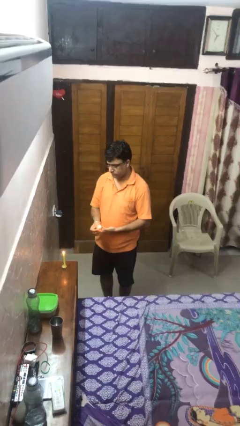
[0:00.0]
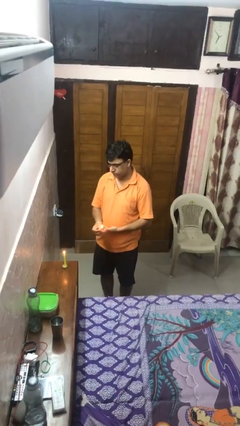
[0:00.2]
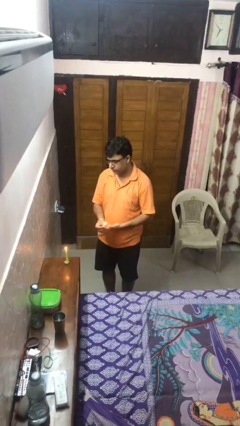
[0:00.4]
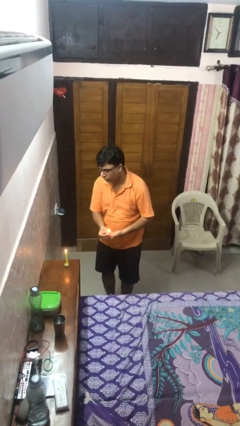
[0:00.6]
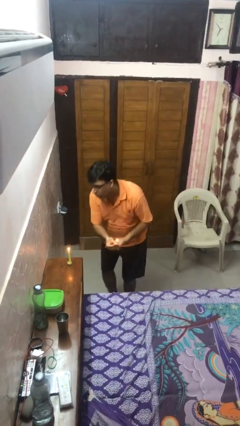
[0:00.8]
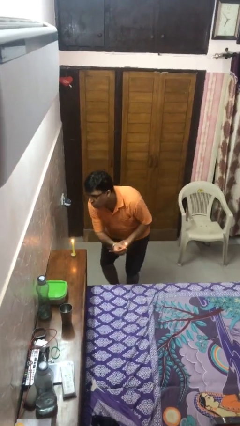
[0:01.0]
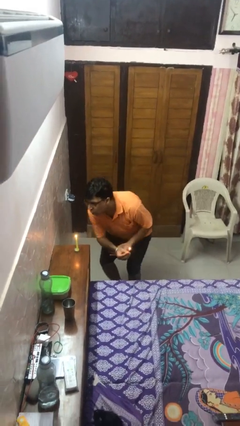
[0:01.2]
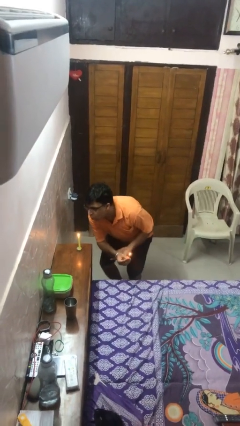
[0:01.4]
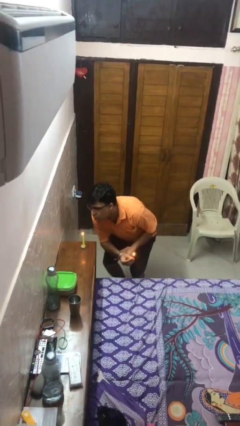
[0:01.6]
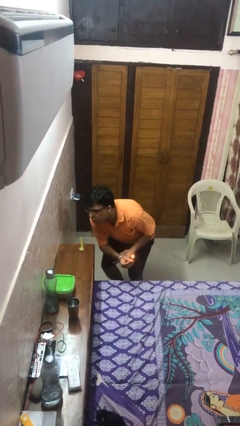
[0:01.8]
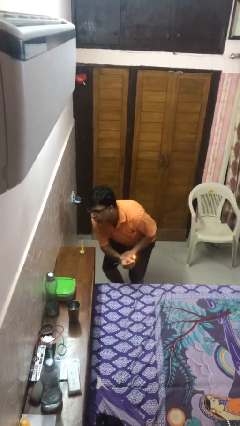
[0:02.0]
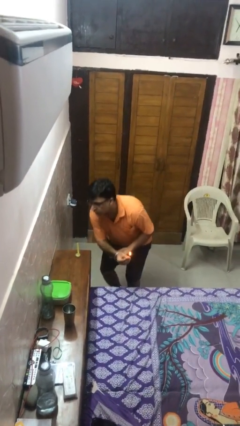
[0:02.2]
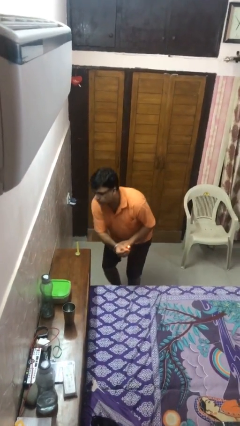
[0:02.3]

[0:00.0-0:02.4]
person extinguishes candle

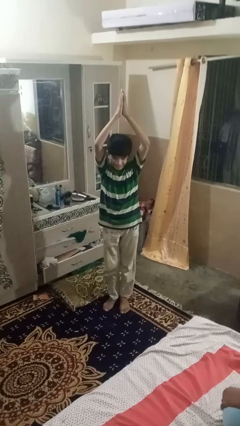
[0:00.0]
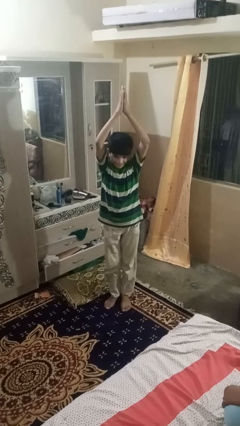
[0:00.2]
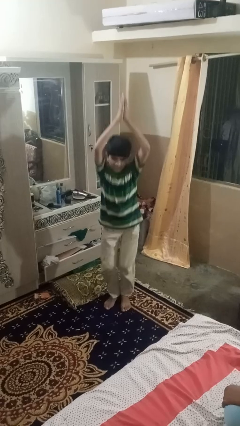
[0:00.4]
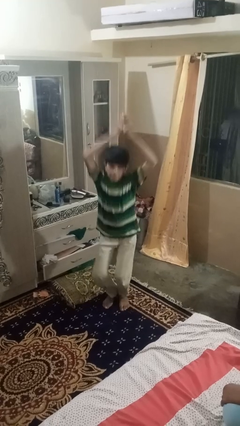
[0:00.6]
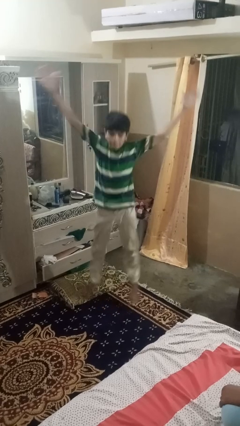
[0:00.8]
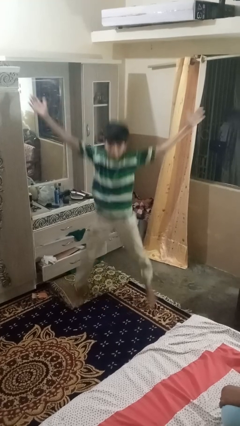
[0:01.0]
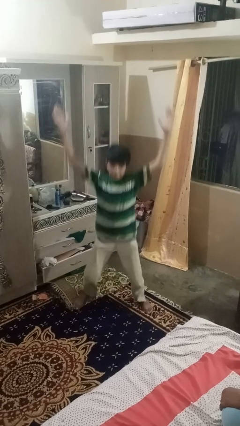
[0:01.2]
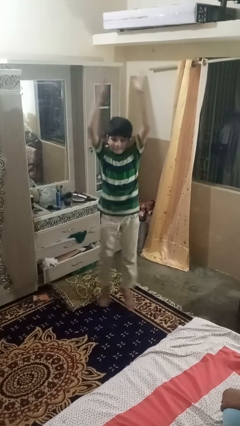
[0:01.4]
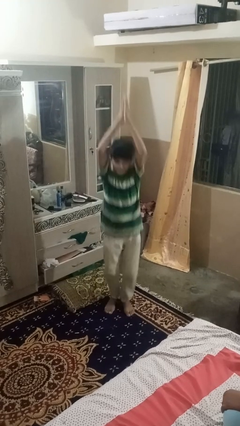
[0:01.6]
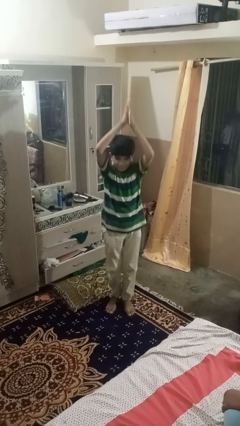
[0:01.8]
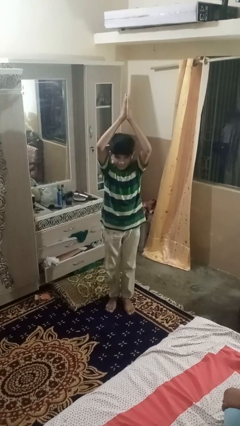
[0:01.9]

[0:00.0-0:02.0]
person exercises with jumping jacks

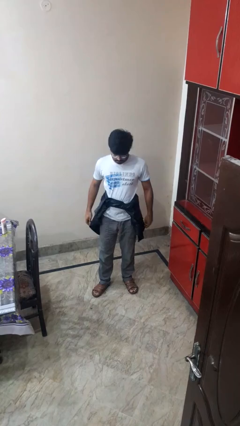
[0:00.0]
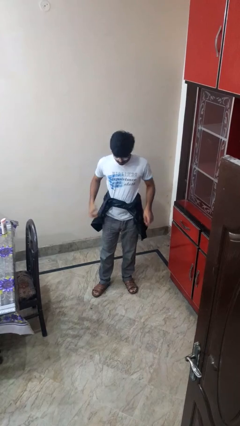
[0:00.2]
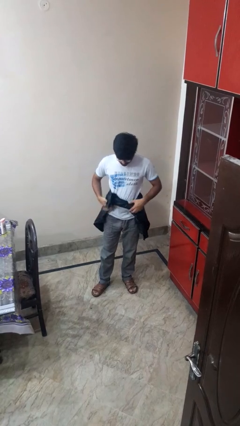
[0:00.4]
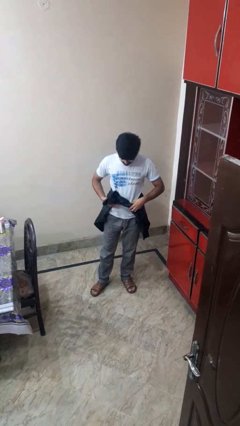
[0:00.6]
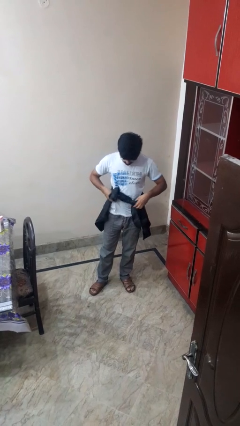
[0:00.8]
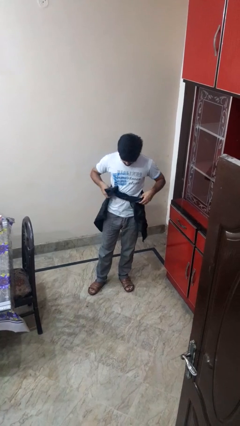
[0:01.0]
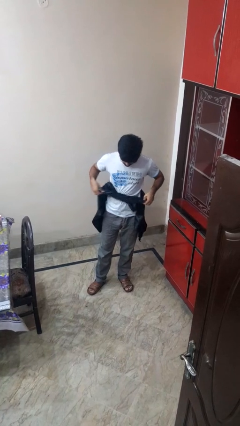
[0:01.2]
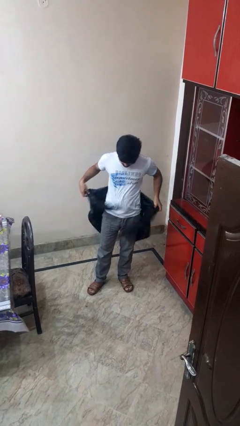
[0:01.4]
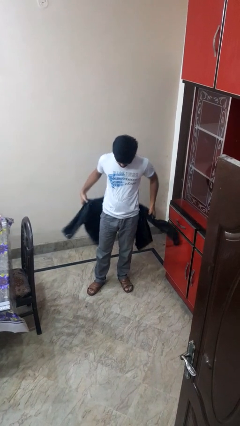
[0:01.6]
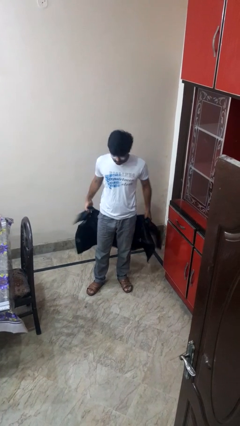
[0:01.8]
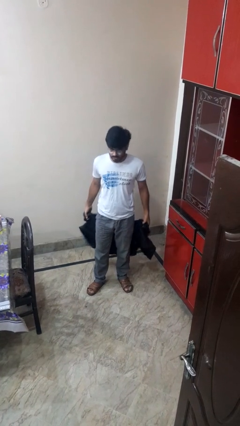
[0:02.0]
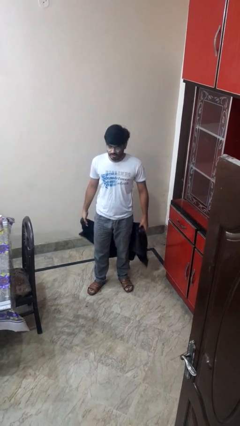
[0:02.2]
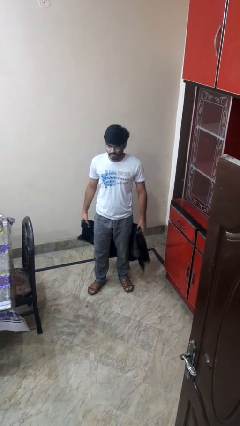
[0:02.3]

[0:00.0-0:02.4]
person unties jacket around waist

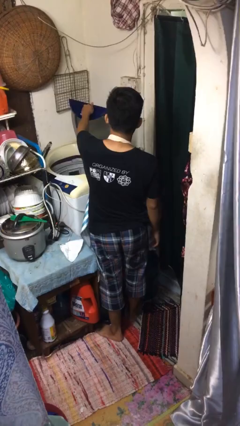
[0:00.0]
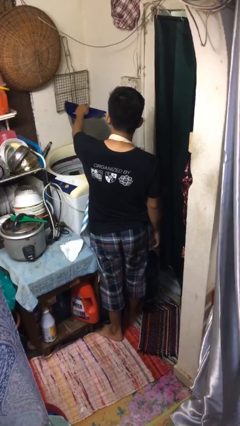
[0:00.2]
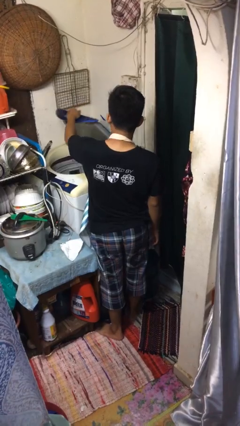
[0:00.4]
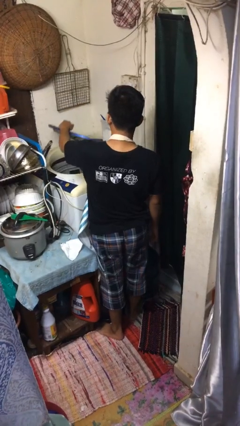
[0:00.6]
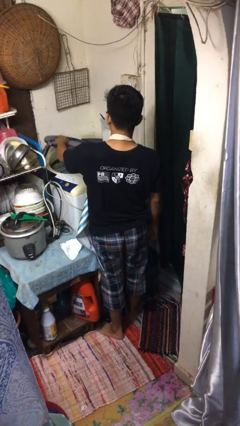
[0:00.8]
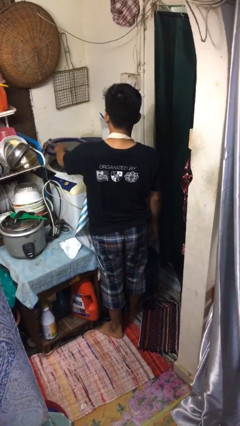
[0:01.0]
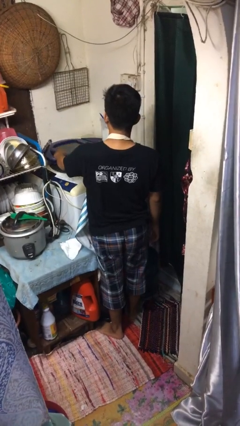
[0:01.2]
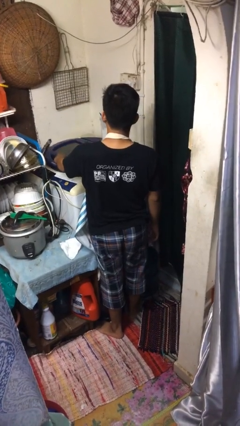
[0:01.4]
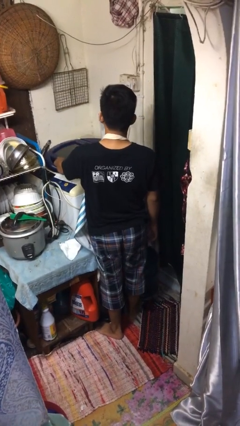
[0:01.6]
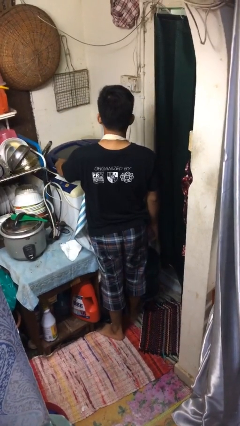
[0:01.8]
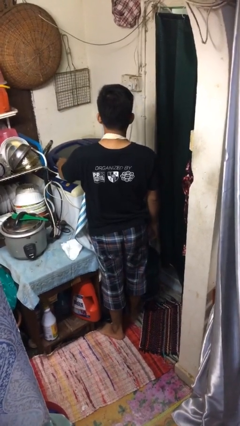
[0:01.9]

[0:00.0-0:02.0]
person closes clothes washer

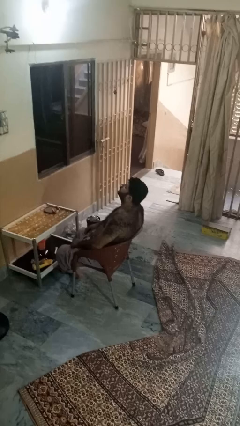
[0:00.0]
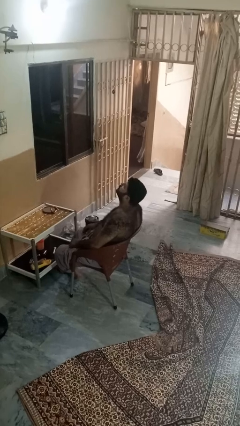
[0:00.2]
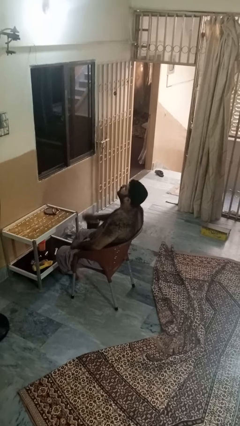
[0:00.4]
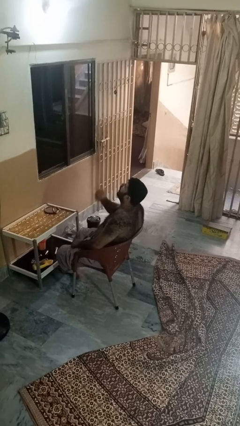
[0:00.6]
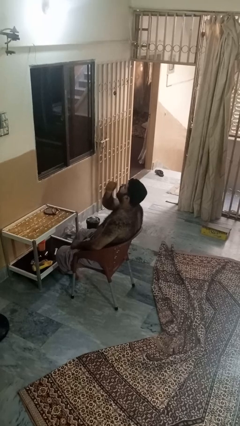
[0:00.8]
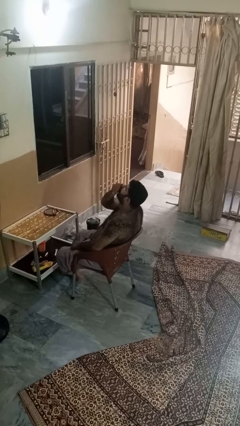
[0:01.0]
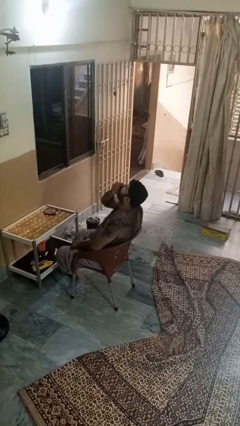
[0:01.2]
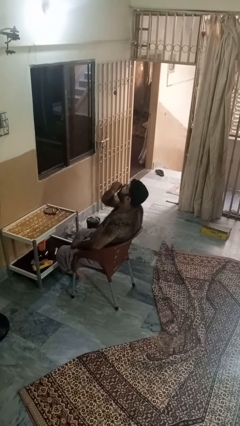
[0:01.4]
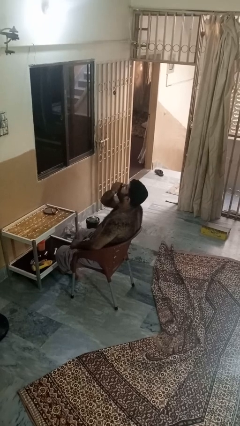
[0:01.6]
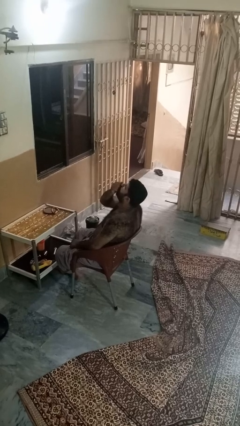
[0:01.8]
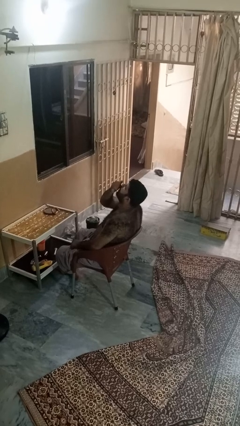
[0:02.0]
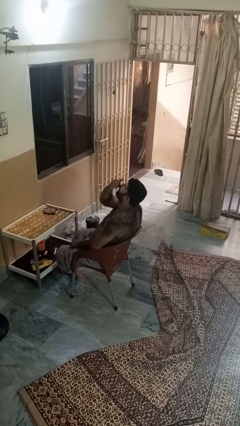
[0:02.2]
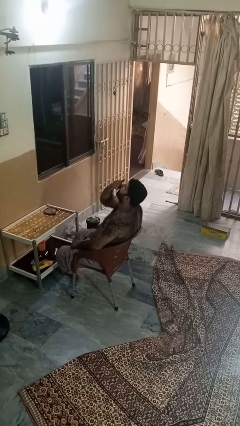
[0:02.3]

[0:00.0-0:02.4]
person yawns

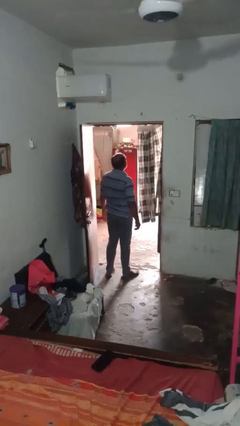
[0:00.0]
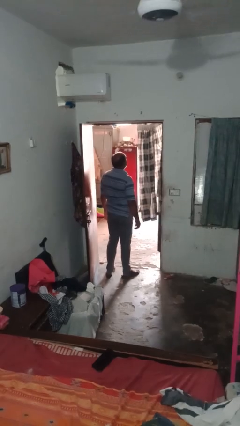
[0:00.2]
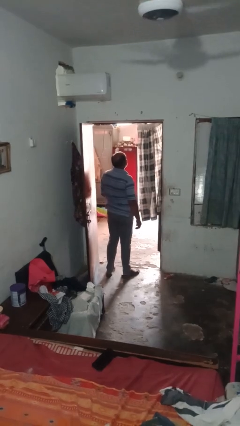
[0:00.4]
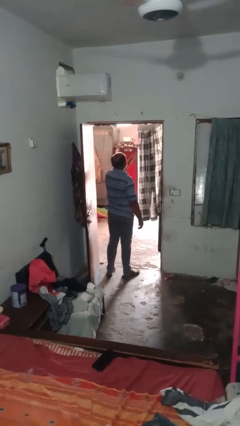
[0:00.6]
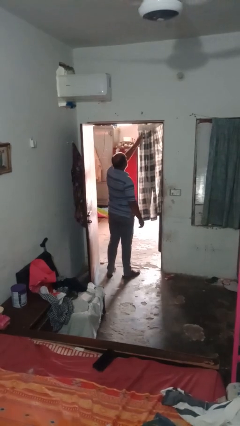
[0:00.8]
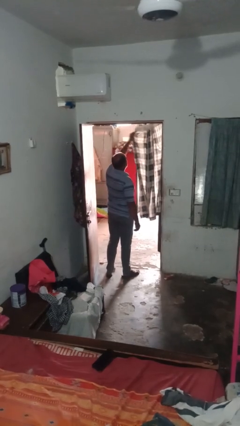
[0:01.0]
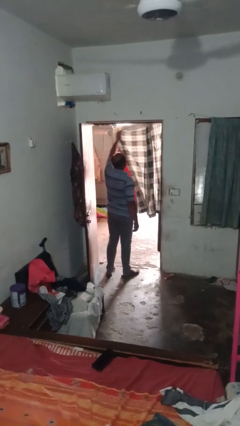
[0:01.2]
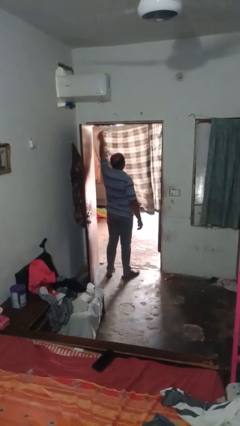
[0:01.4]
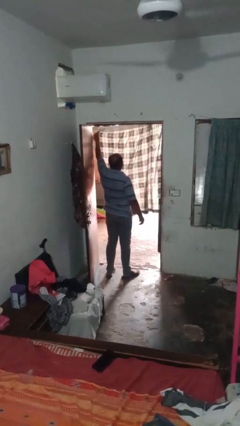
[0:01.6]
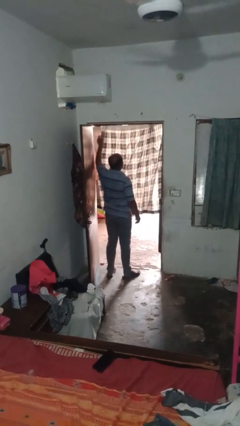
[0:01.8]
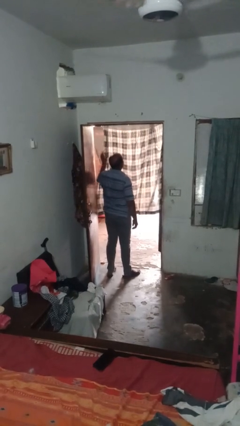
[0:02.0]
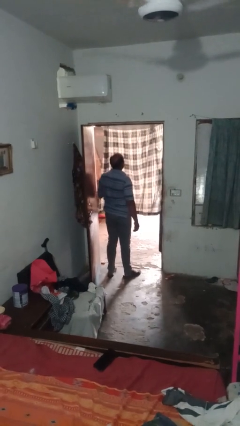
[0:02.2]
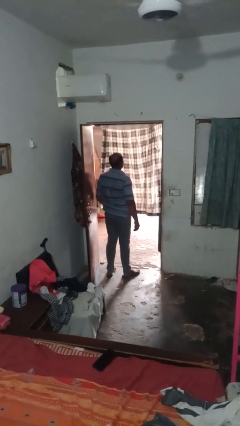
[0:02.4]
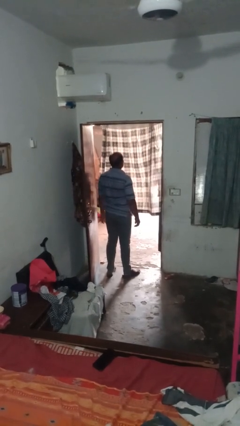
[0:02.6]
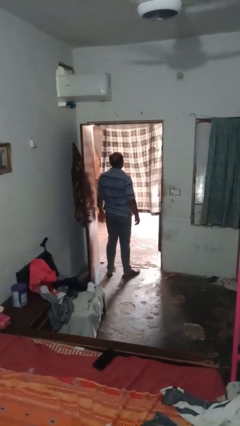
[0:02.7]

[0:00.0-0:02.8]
person closes curtains

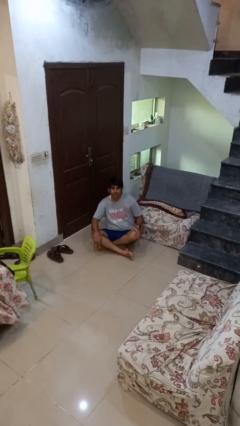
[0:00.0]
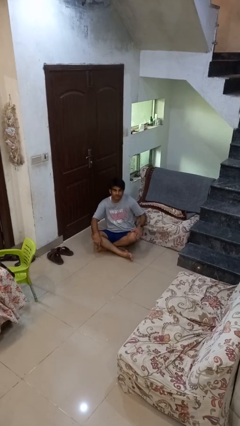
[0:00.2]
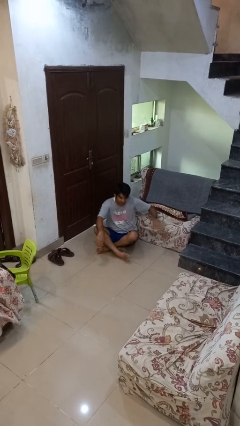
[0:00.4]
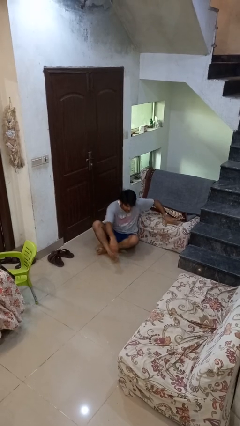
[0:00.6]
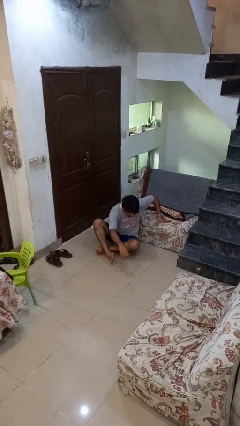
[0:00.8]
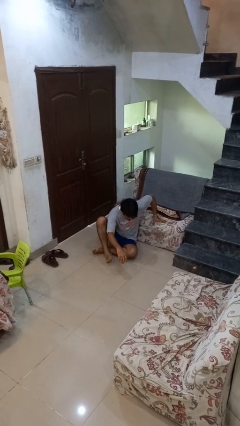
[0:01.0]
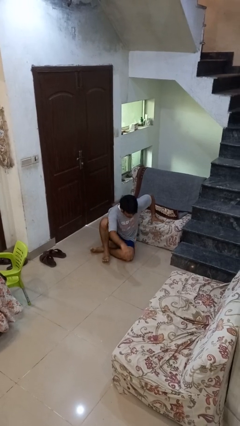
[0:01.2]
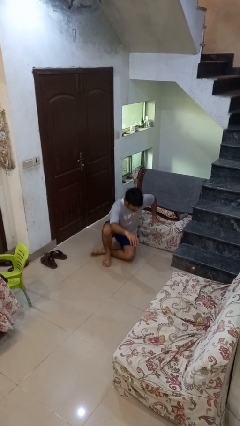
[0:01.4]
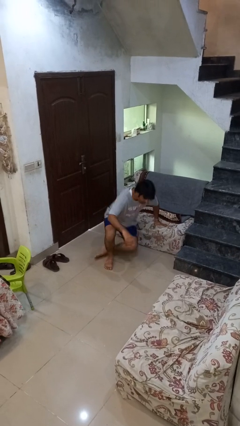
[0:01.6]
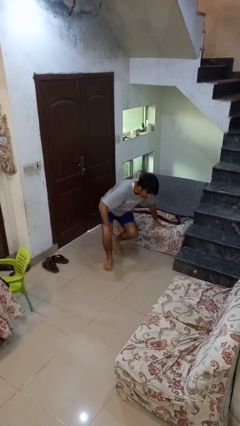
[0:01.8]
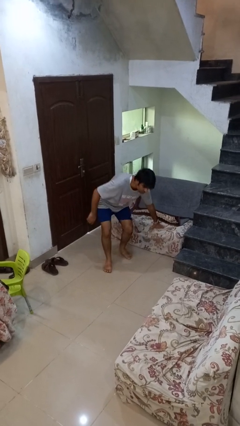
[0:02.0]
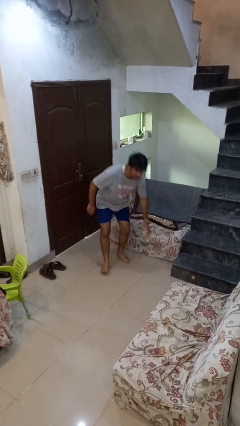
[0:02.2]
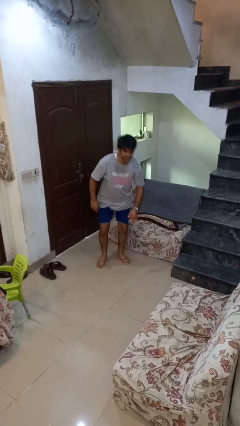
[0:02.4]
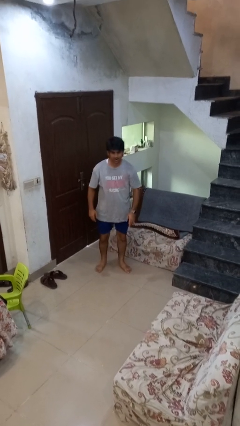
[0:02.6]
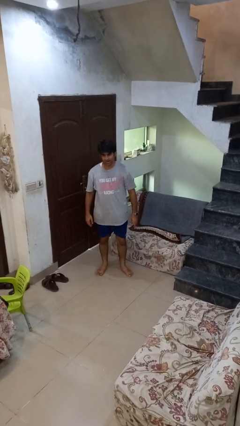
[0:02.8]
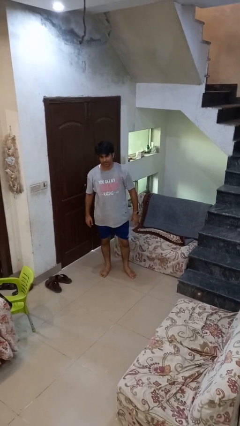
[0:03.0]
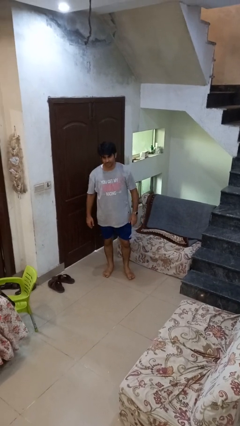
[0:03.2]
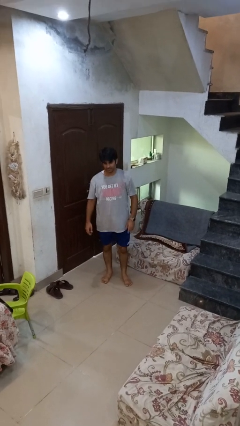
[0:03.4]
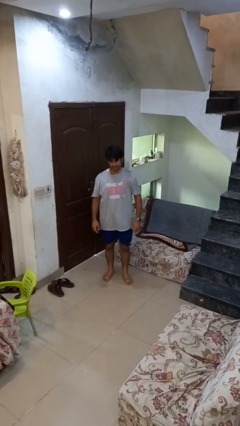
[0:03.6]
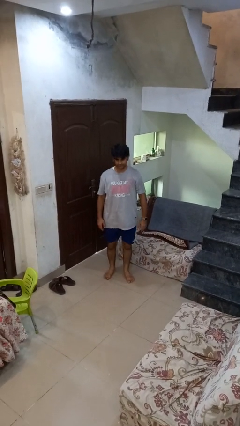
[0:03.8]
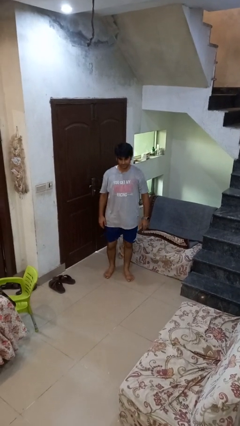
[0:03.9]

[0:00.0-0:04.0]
person stands up from floor
